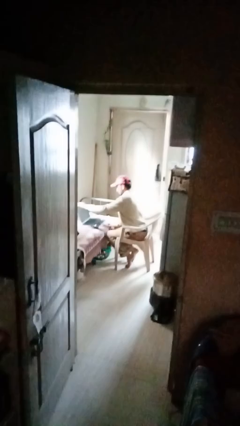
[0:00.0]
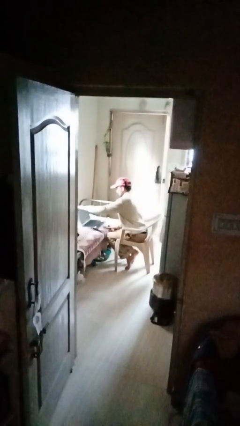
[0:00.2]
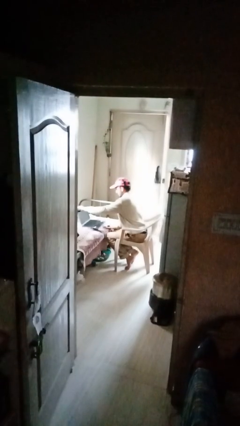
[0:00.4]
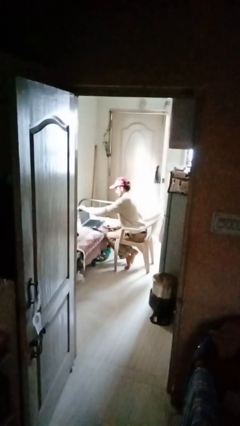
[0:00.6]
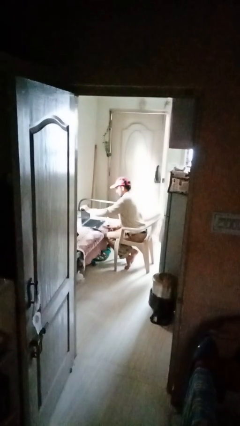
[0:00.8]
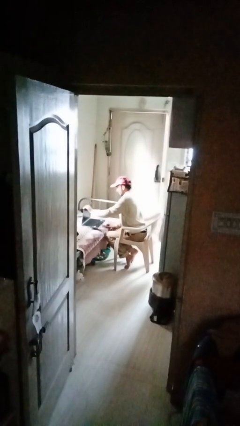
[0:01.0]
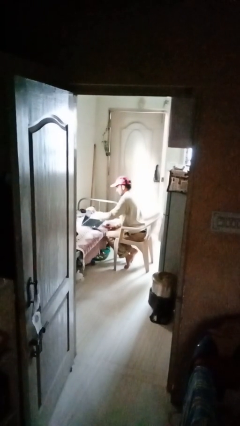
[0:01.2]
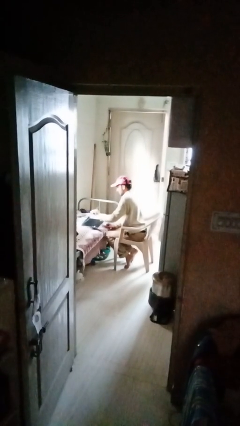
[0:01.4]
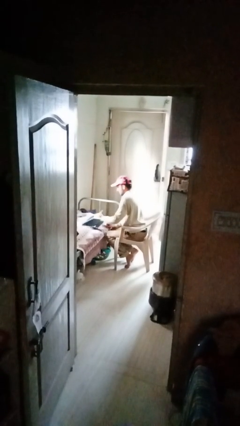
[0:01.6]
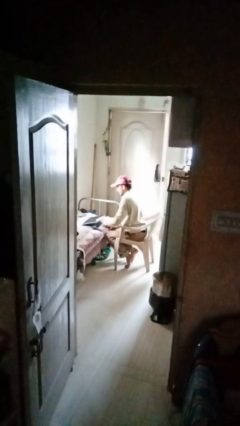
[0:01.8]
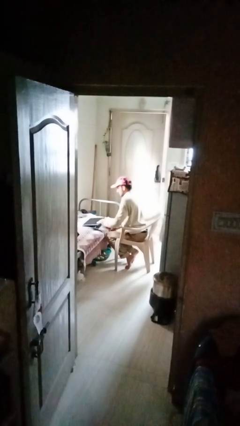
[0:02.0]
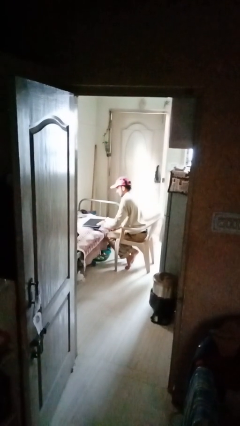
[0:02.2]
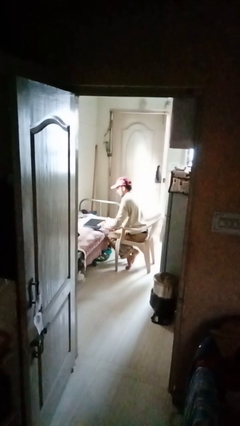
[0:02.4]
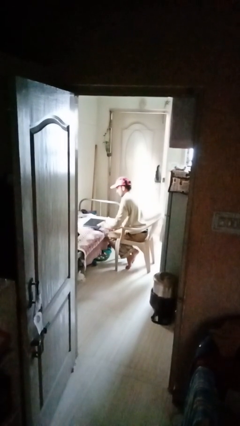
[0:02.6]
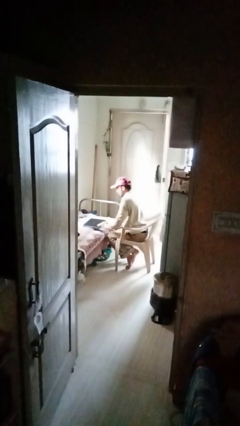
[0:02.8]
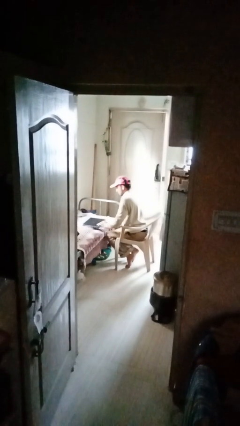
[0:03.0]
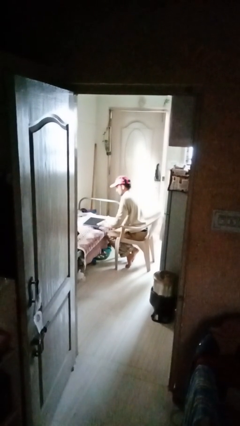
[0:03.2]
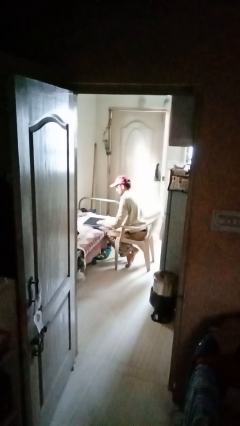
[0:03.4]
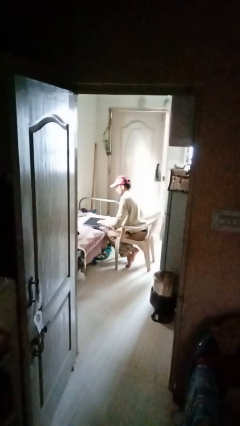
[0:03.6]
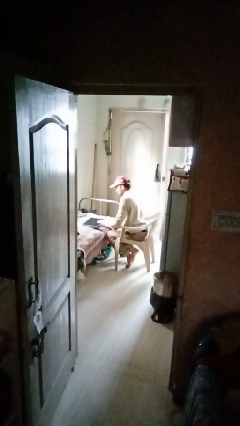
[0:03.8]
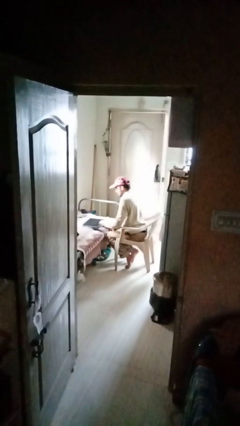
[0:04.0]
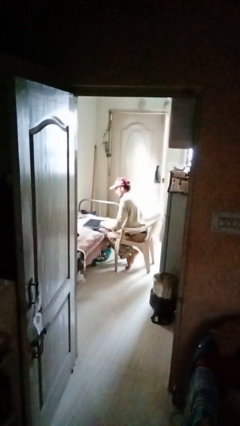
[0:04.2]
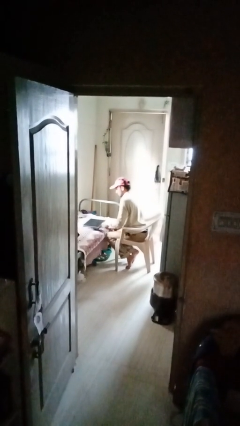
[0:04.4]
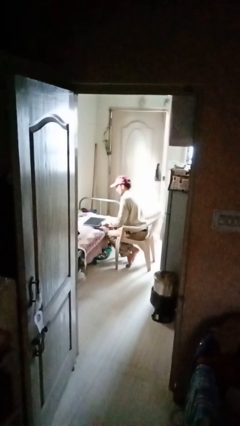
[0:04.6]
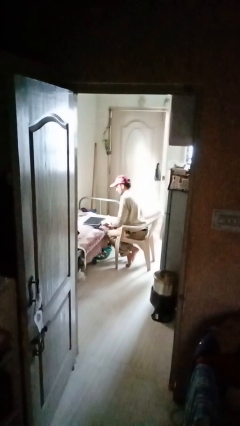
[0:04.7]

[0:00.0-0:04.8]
person closes laptop

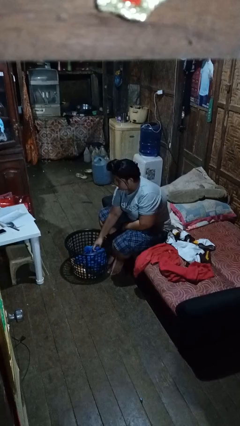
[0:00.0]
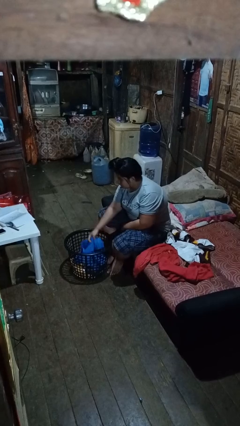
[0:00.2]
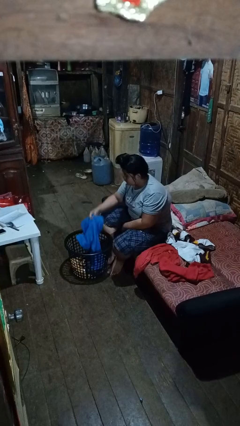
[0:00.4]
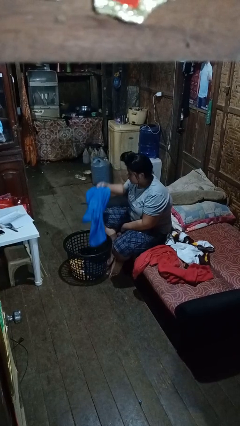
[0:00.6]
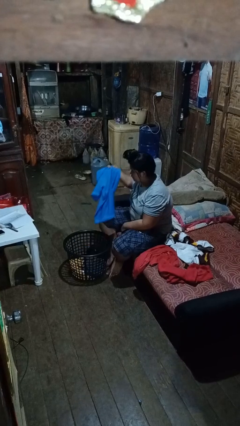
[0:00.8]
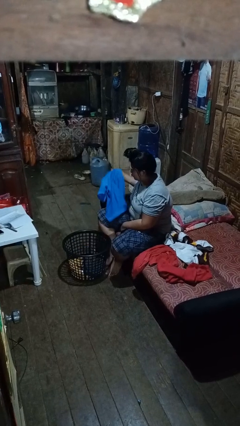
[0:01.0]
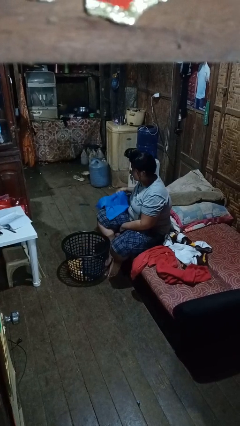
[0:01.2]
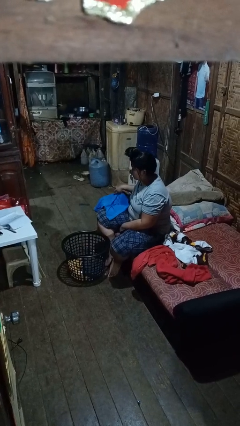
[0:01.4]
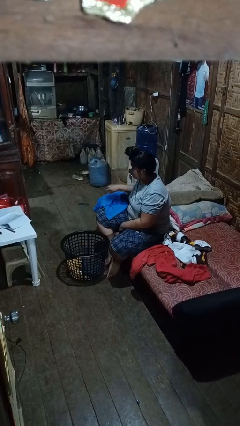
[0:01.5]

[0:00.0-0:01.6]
person takes object from basket

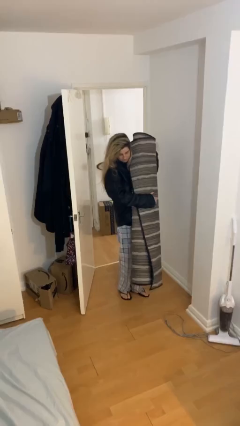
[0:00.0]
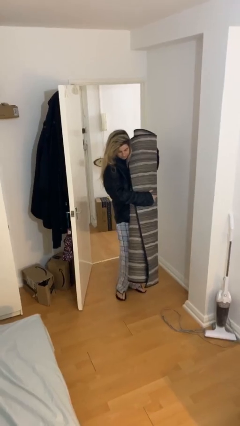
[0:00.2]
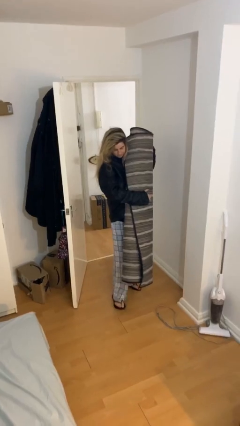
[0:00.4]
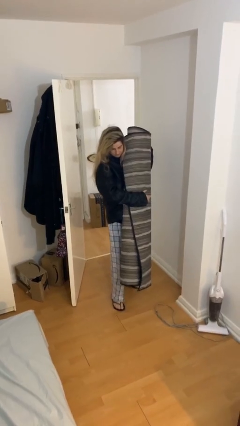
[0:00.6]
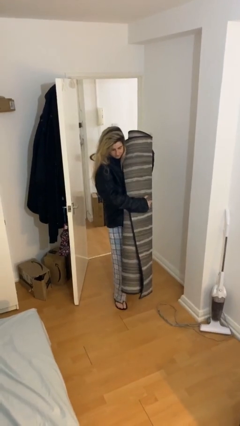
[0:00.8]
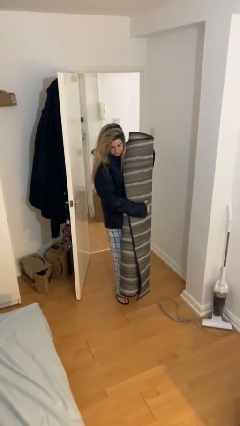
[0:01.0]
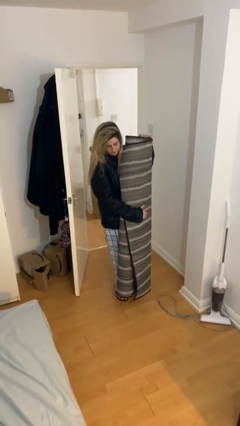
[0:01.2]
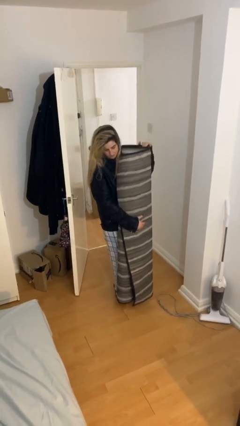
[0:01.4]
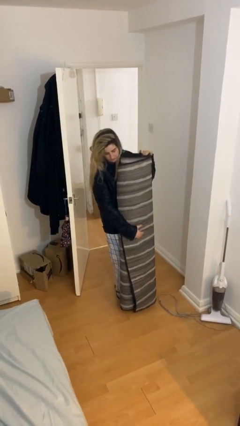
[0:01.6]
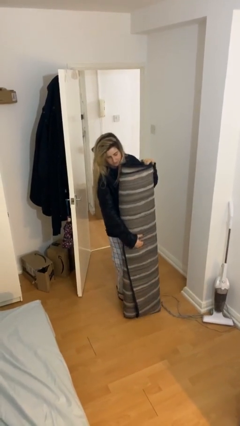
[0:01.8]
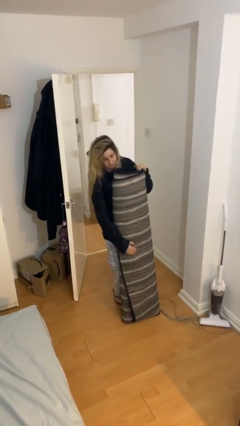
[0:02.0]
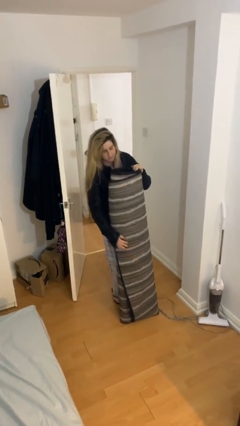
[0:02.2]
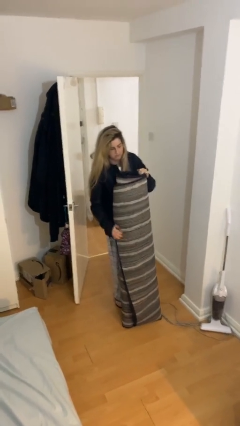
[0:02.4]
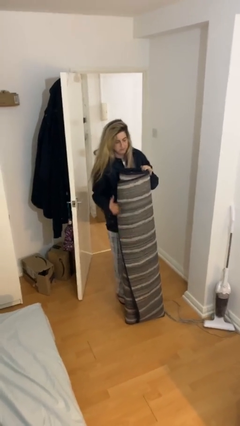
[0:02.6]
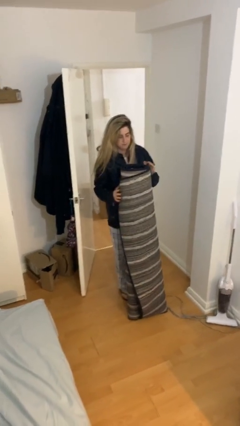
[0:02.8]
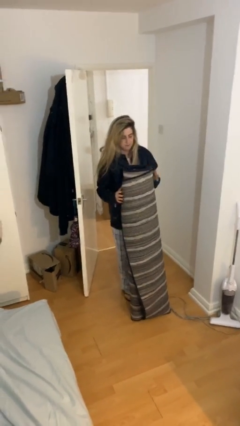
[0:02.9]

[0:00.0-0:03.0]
person puts down object on floor

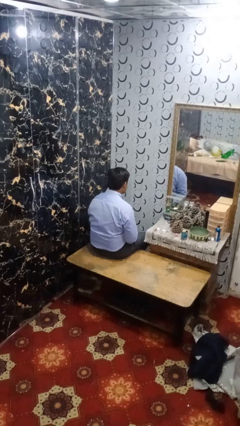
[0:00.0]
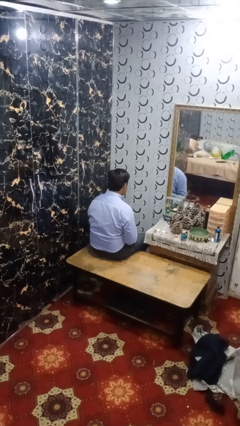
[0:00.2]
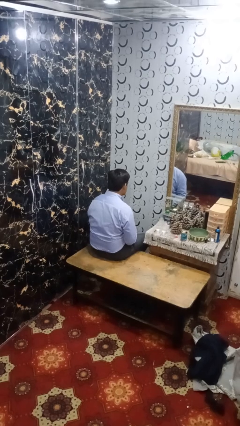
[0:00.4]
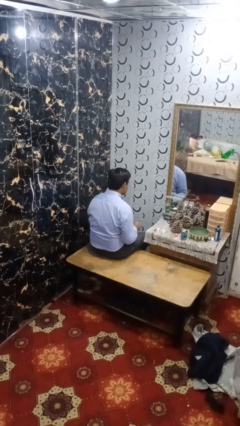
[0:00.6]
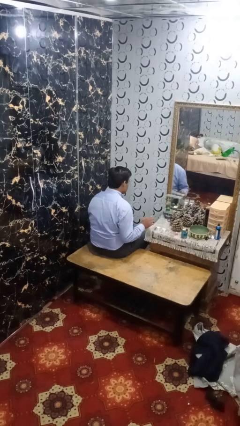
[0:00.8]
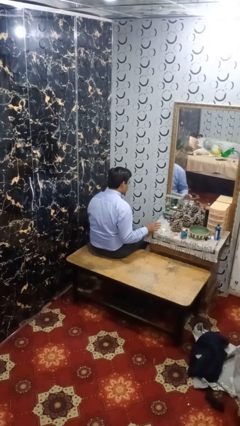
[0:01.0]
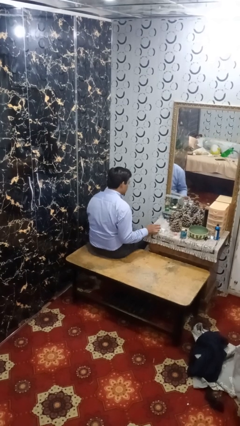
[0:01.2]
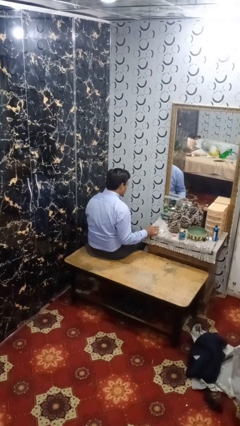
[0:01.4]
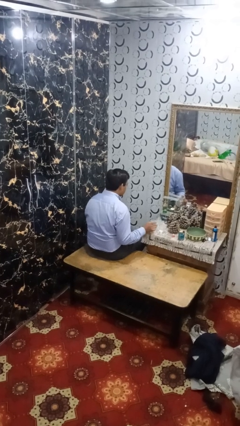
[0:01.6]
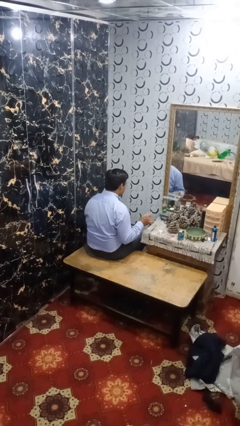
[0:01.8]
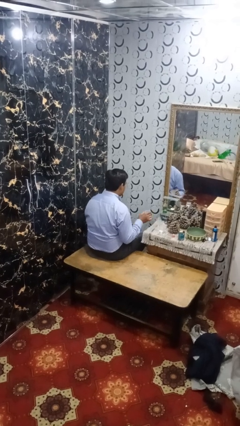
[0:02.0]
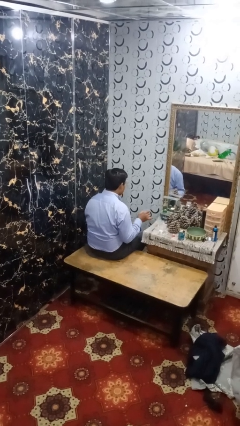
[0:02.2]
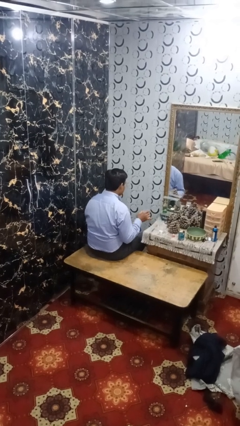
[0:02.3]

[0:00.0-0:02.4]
person picks up object from table

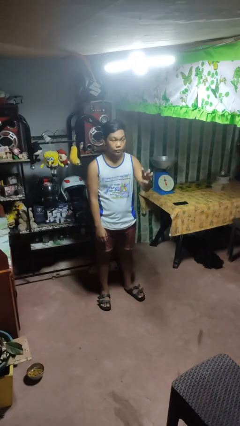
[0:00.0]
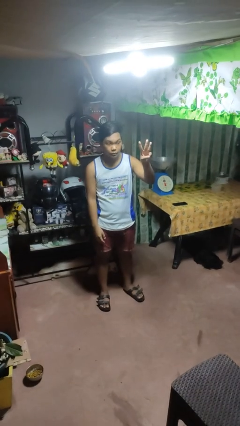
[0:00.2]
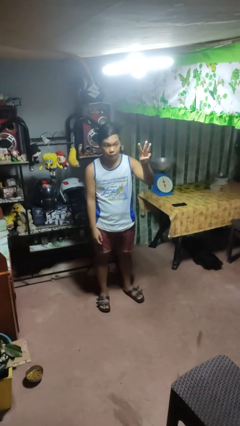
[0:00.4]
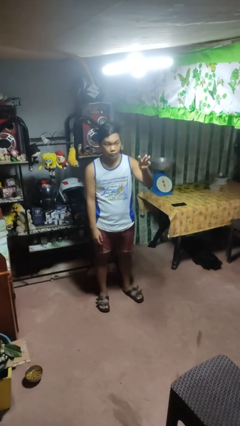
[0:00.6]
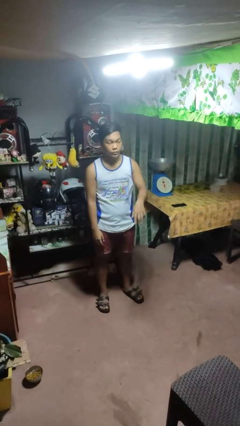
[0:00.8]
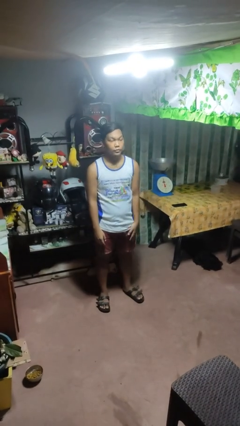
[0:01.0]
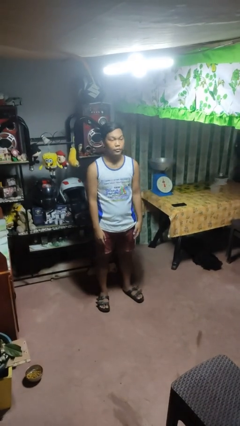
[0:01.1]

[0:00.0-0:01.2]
person gestures number three

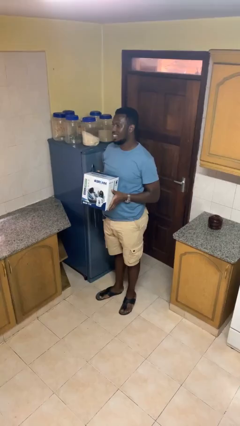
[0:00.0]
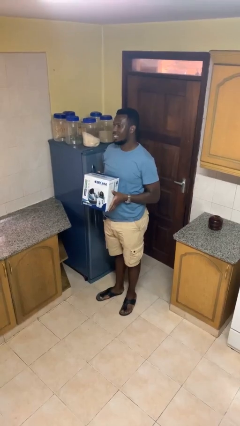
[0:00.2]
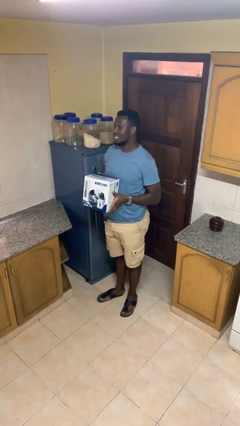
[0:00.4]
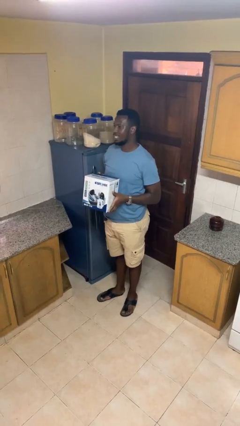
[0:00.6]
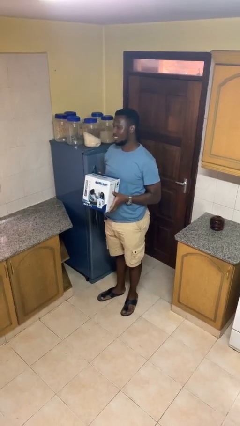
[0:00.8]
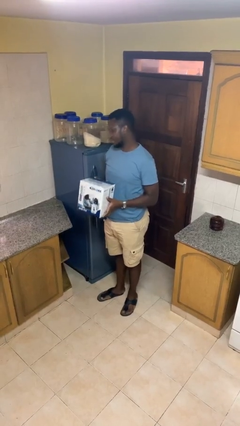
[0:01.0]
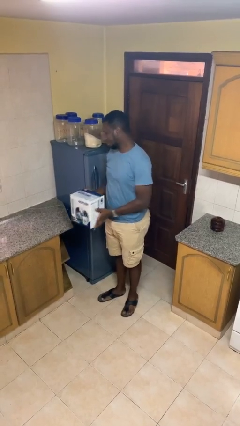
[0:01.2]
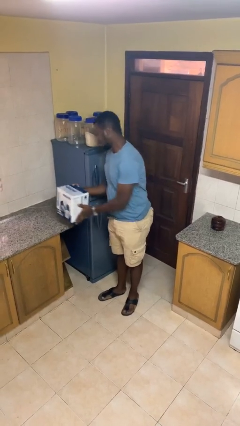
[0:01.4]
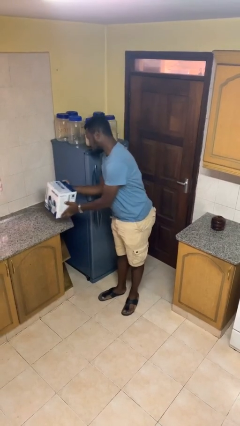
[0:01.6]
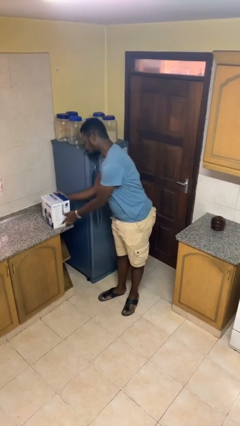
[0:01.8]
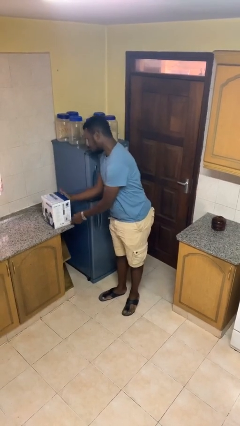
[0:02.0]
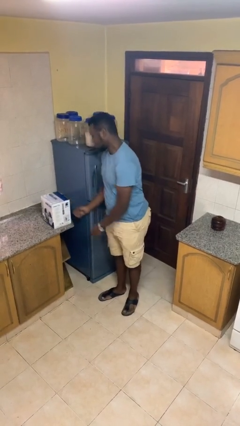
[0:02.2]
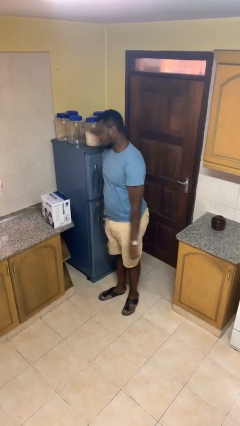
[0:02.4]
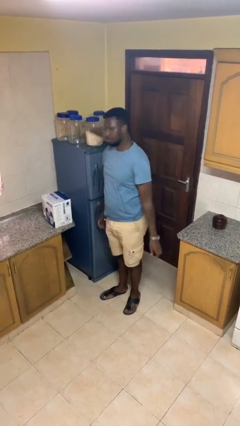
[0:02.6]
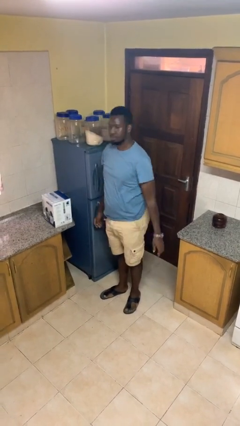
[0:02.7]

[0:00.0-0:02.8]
person puts down object on table

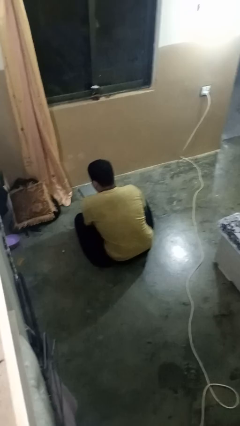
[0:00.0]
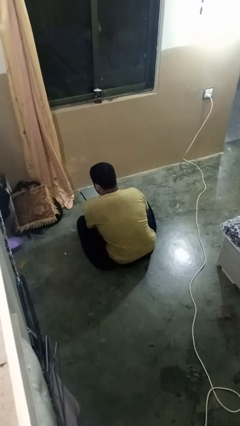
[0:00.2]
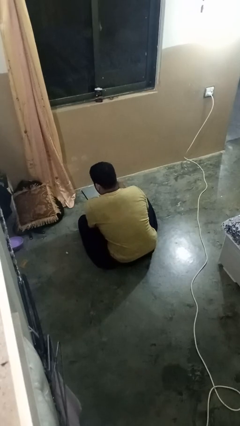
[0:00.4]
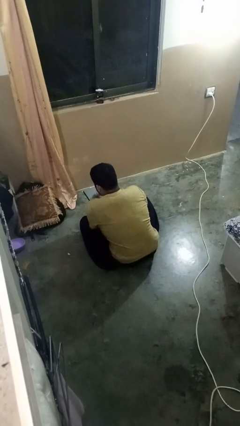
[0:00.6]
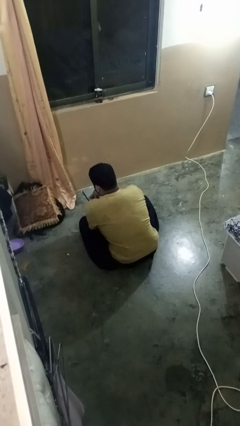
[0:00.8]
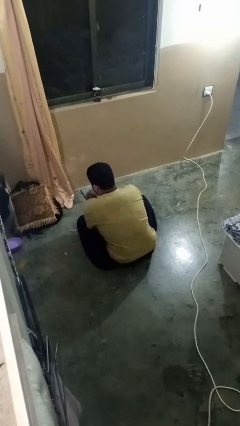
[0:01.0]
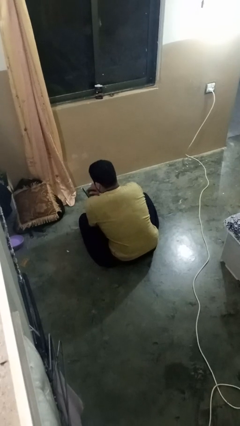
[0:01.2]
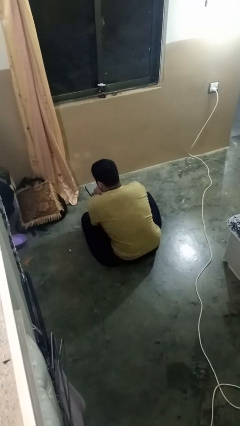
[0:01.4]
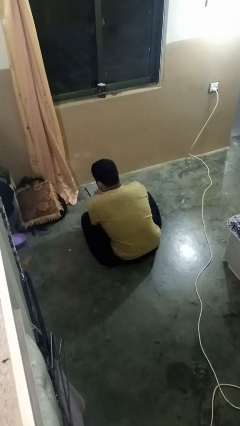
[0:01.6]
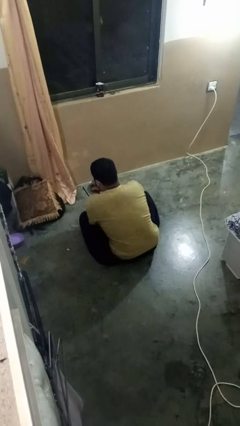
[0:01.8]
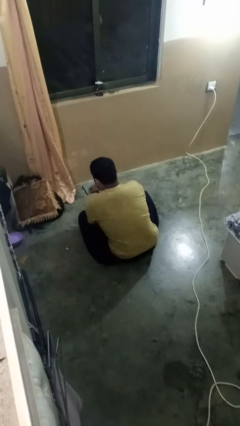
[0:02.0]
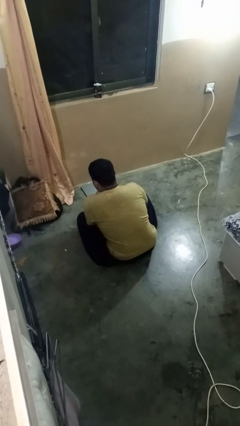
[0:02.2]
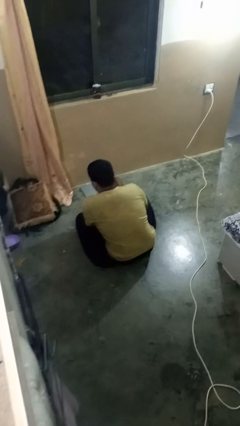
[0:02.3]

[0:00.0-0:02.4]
person interacts with tablet
